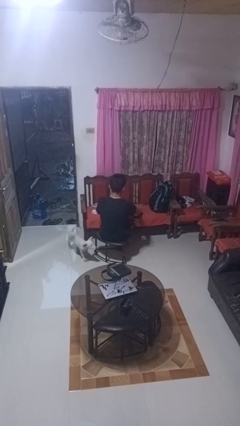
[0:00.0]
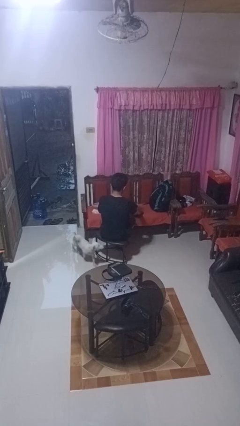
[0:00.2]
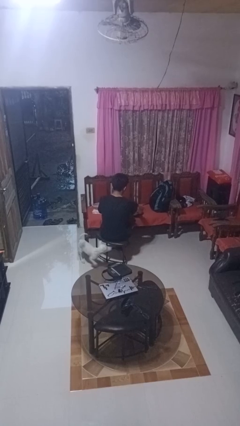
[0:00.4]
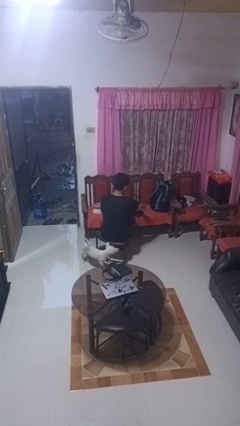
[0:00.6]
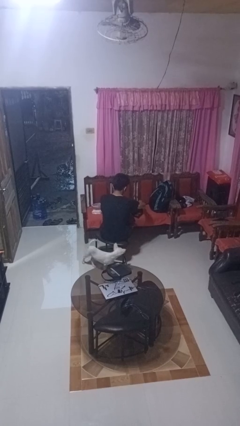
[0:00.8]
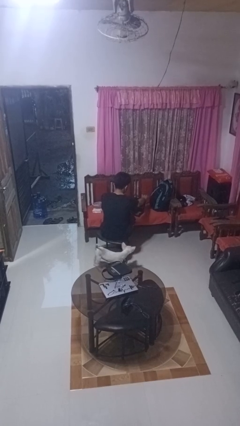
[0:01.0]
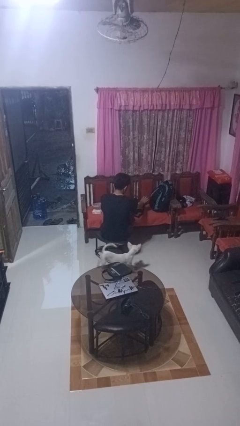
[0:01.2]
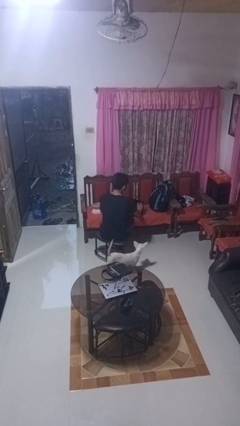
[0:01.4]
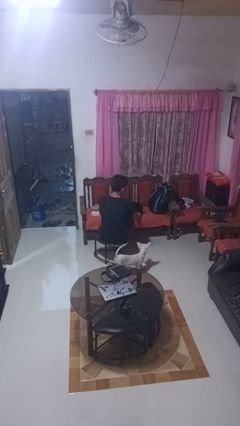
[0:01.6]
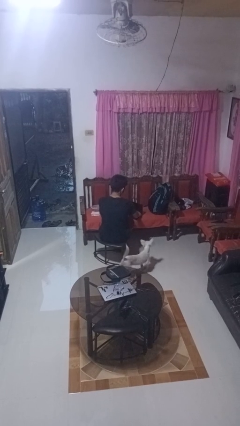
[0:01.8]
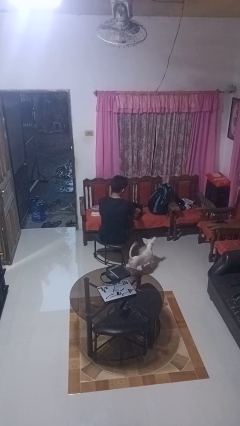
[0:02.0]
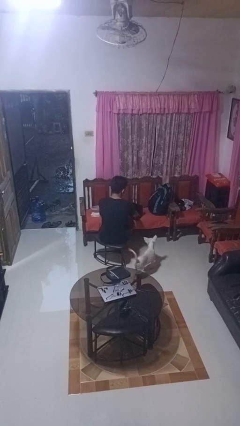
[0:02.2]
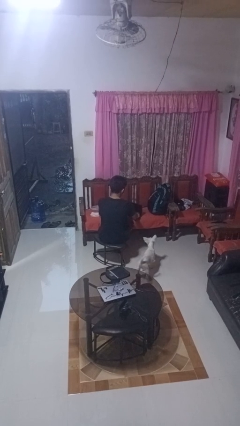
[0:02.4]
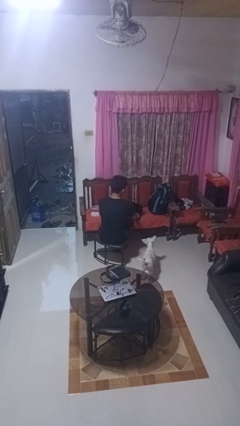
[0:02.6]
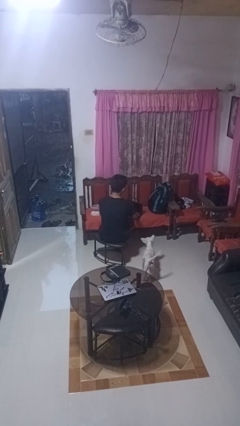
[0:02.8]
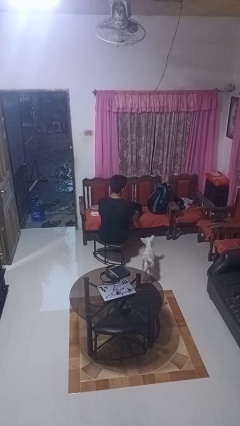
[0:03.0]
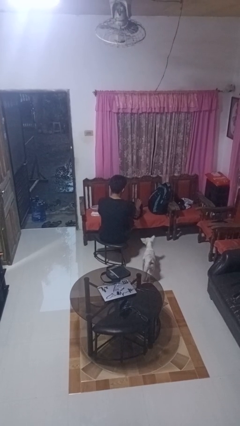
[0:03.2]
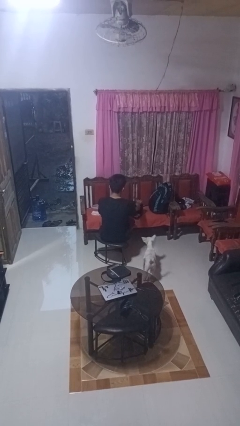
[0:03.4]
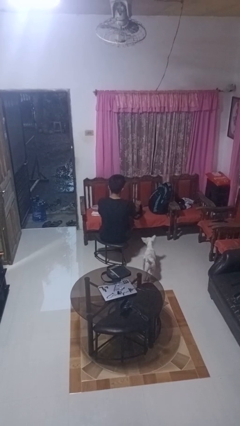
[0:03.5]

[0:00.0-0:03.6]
person opens laptop

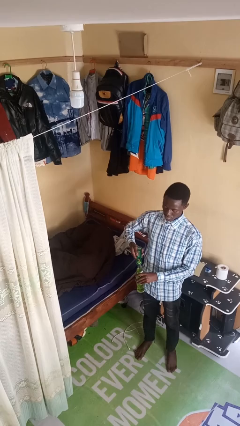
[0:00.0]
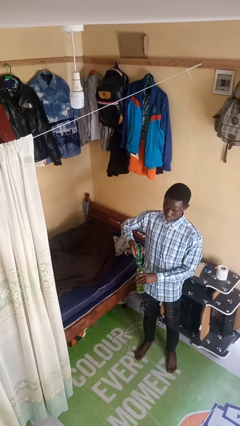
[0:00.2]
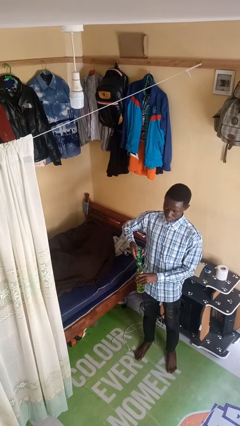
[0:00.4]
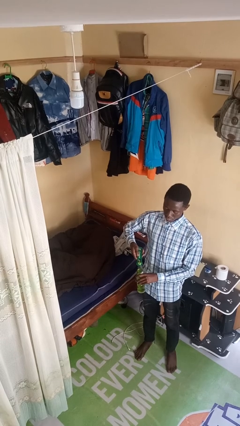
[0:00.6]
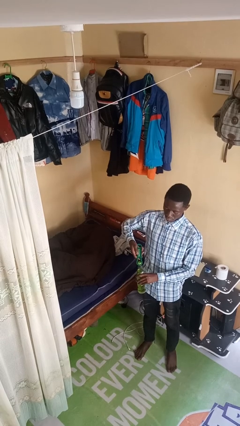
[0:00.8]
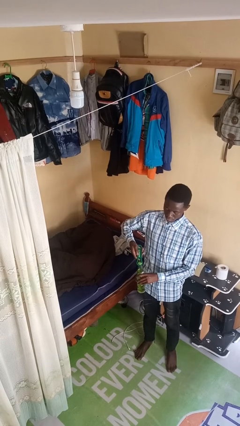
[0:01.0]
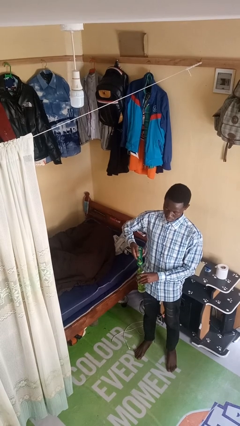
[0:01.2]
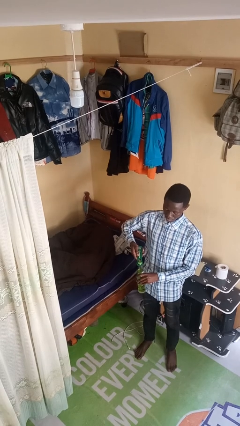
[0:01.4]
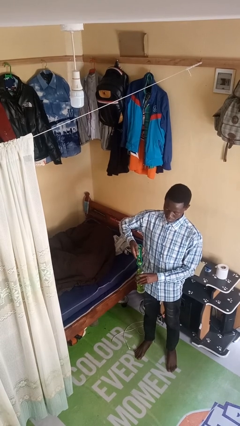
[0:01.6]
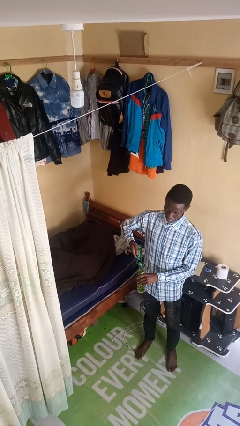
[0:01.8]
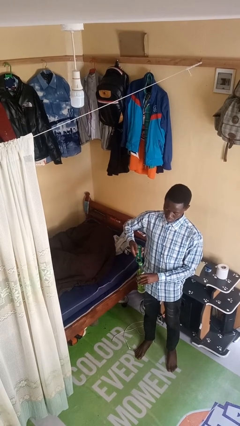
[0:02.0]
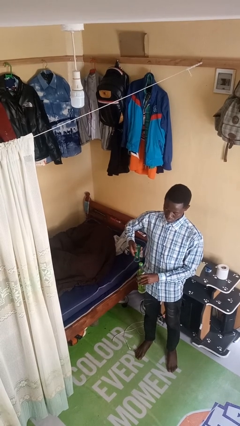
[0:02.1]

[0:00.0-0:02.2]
person opens can with can opener

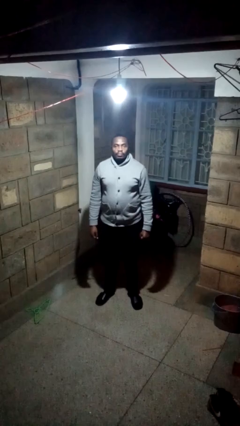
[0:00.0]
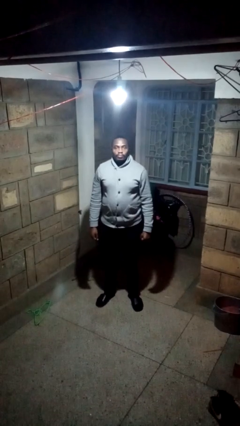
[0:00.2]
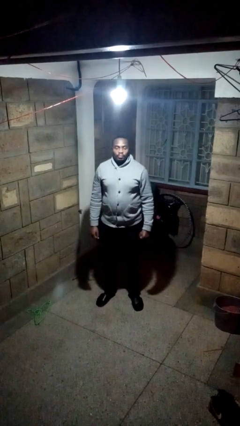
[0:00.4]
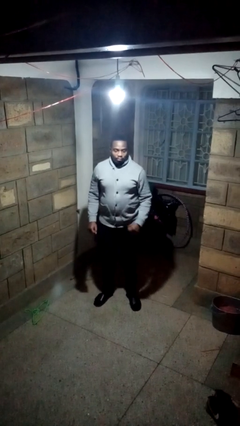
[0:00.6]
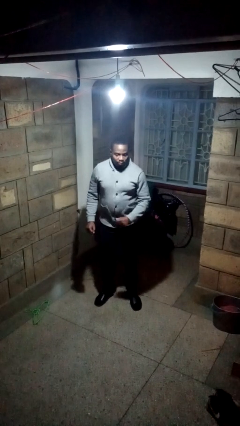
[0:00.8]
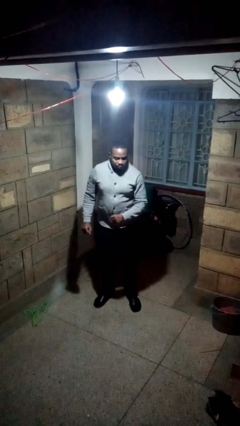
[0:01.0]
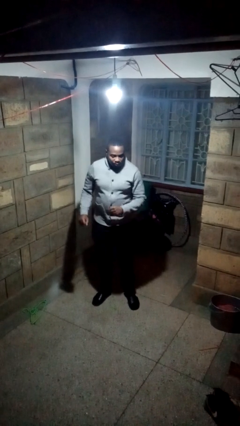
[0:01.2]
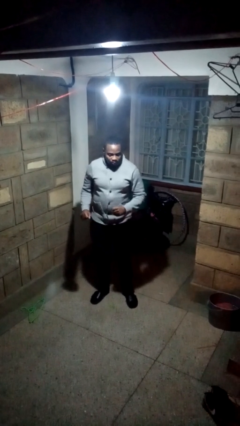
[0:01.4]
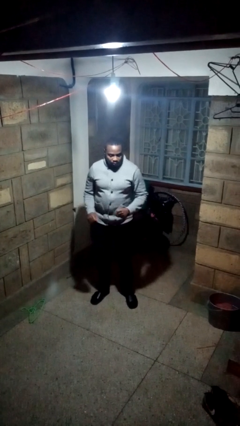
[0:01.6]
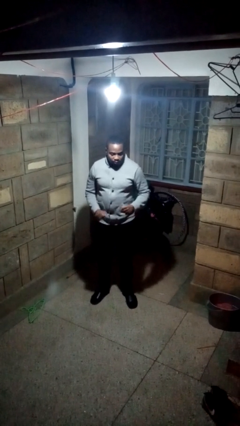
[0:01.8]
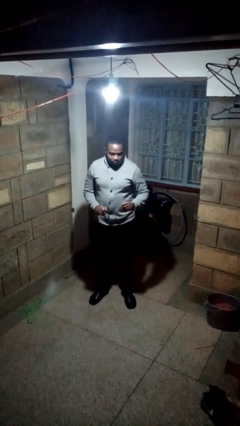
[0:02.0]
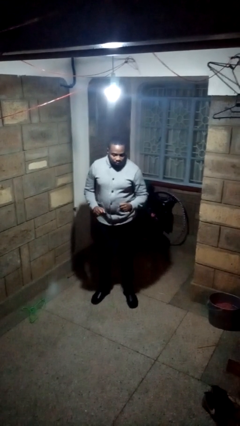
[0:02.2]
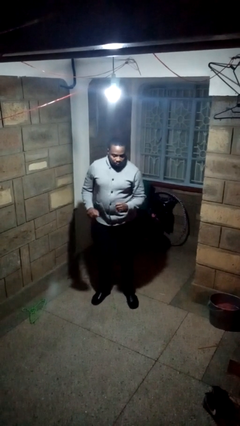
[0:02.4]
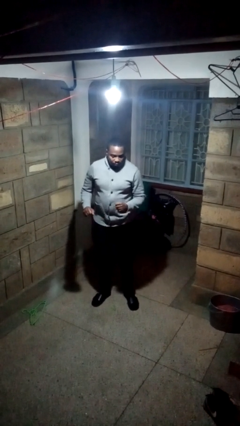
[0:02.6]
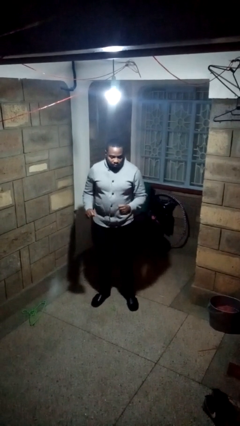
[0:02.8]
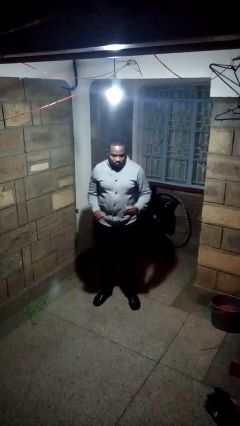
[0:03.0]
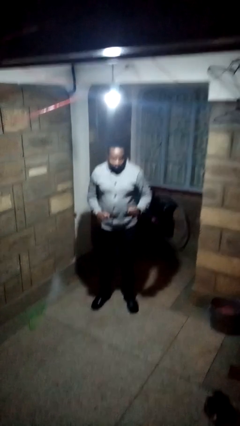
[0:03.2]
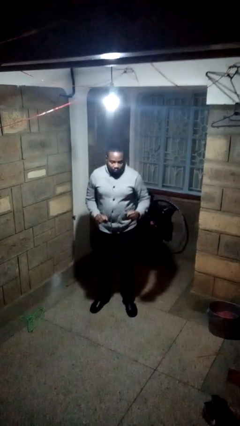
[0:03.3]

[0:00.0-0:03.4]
person dances in place

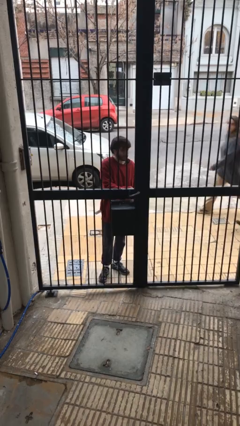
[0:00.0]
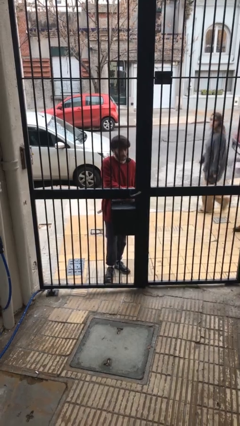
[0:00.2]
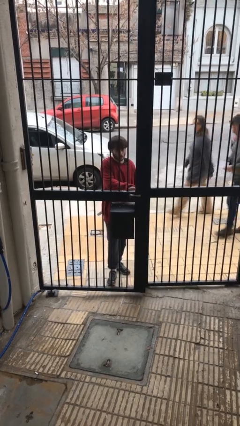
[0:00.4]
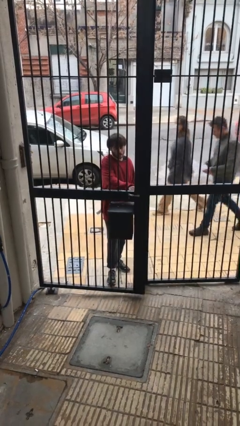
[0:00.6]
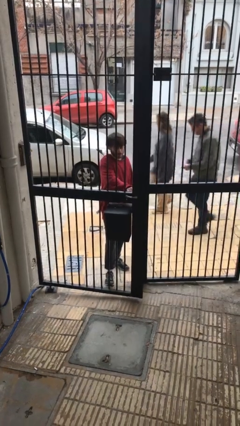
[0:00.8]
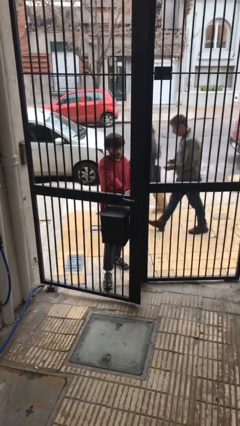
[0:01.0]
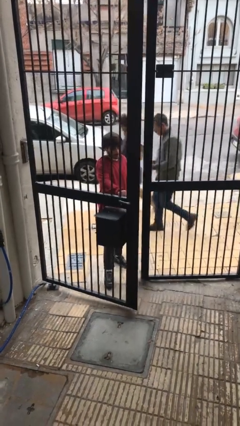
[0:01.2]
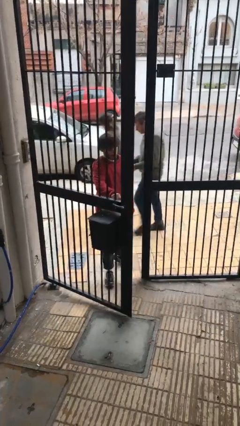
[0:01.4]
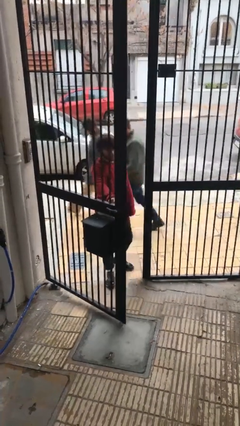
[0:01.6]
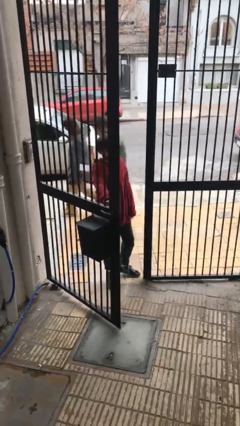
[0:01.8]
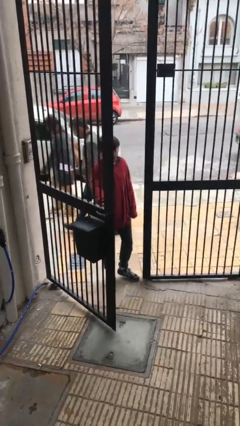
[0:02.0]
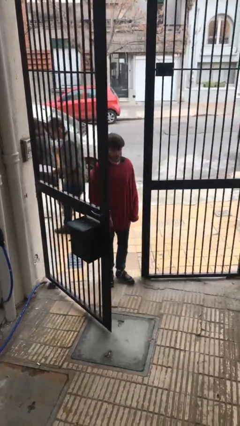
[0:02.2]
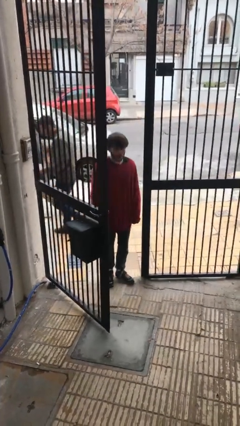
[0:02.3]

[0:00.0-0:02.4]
person opens gate

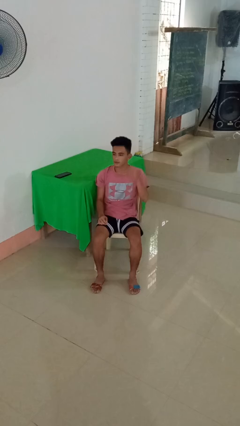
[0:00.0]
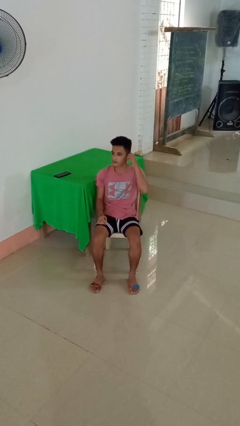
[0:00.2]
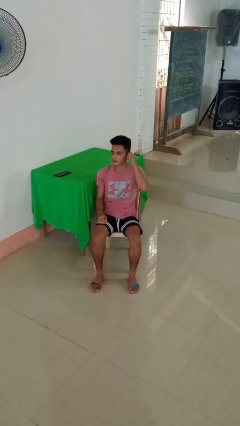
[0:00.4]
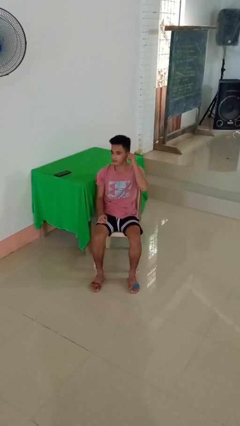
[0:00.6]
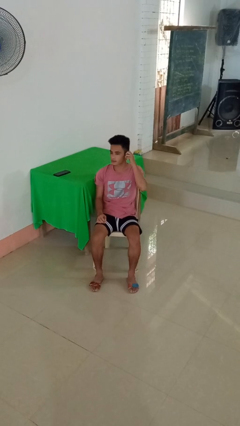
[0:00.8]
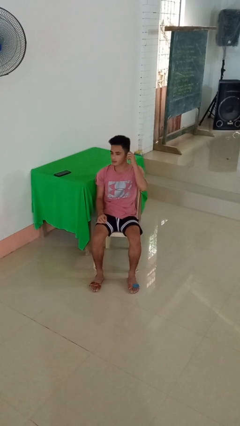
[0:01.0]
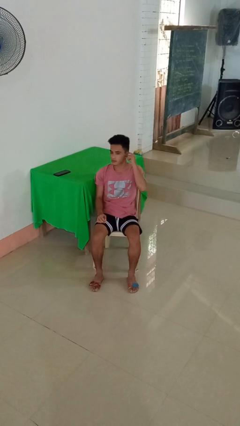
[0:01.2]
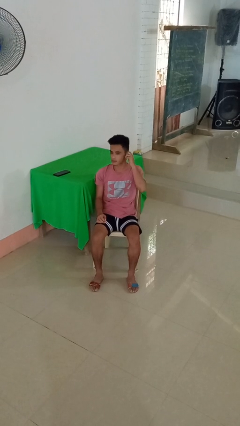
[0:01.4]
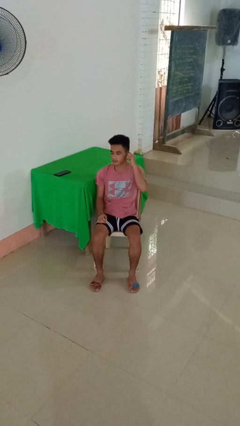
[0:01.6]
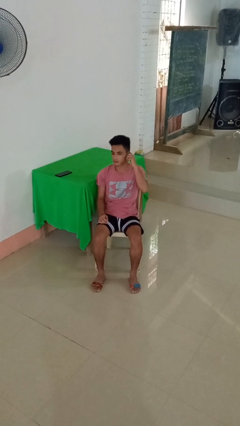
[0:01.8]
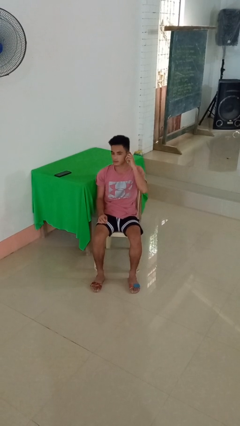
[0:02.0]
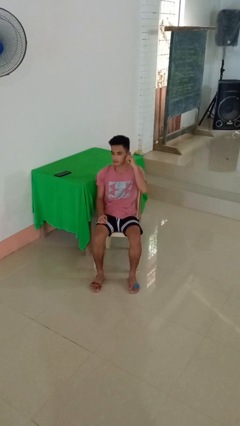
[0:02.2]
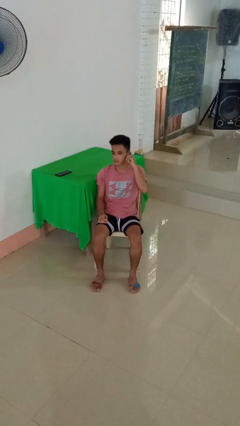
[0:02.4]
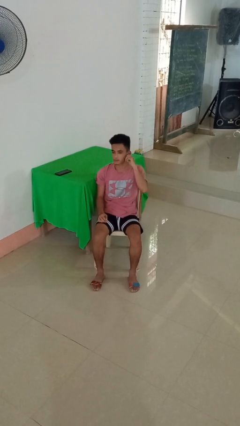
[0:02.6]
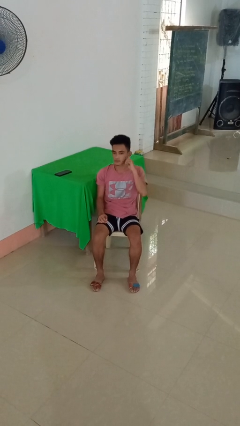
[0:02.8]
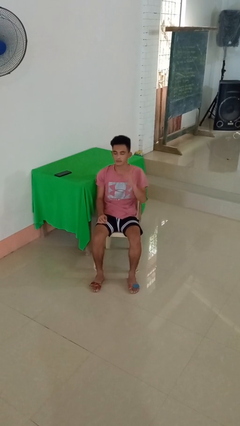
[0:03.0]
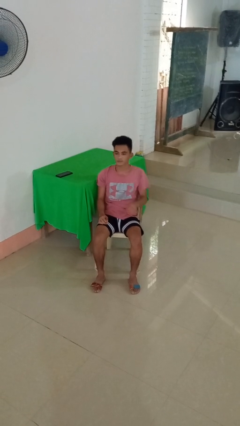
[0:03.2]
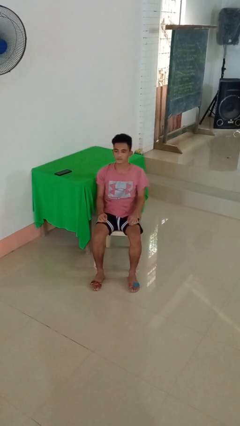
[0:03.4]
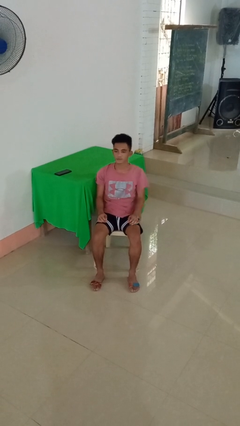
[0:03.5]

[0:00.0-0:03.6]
person touches earlobe

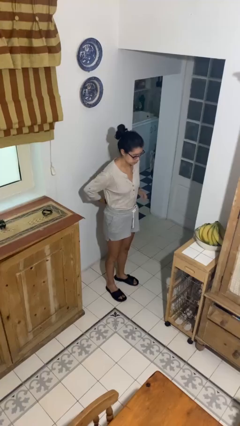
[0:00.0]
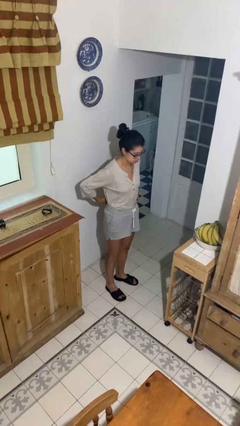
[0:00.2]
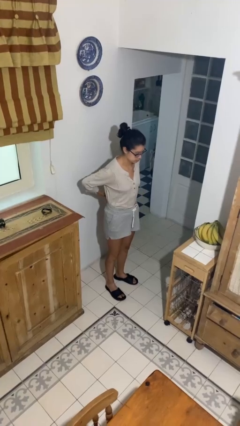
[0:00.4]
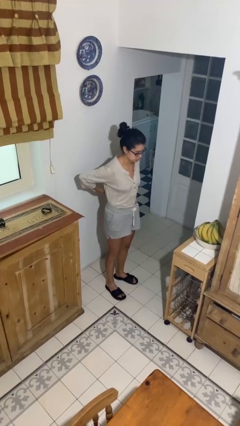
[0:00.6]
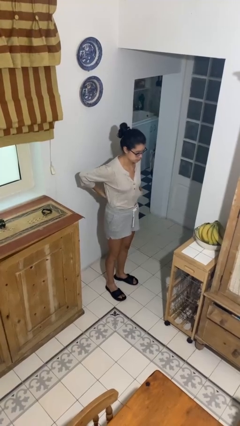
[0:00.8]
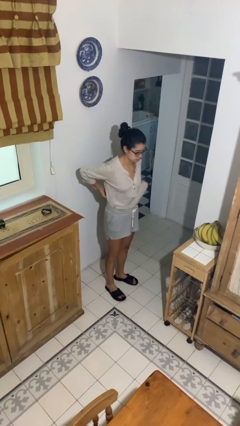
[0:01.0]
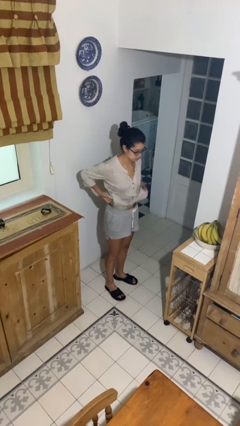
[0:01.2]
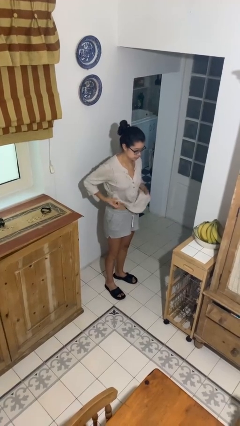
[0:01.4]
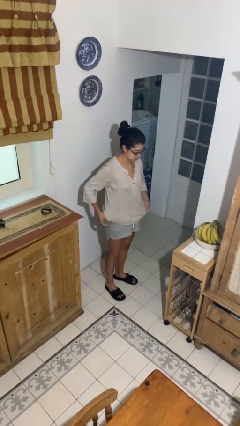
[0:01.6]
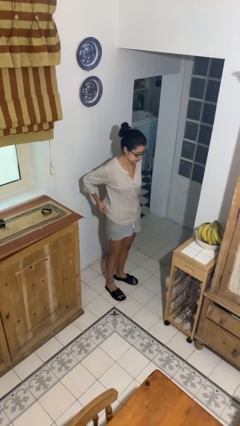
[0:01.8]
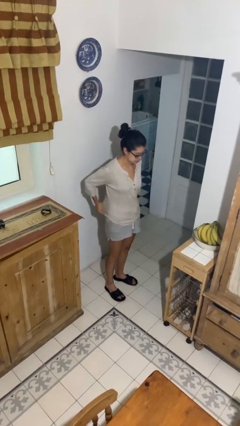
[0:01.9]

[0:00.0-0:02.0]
person untucks shirt

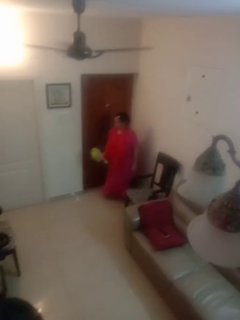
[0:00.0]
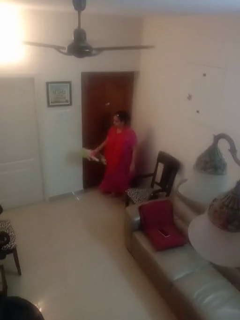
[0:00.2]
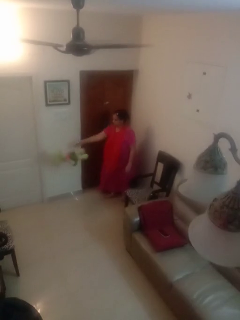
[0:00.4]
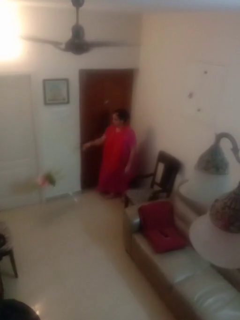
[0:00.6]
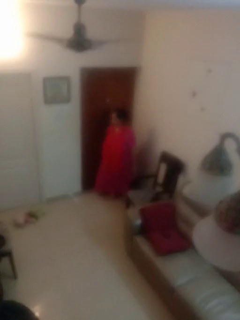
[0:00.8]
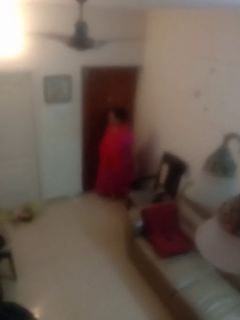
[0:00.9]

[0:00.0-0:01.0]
person throws object to ground
